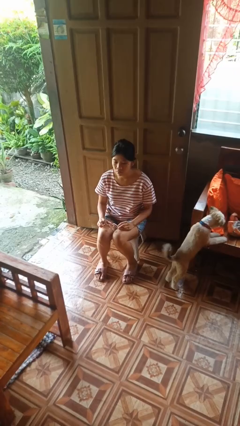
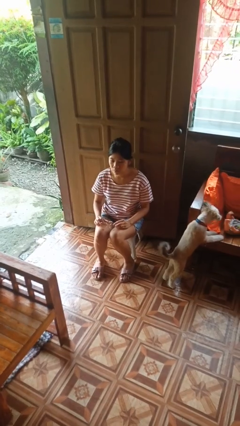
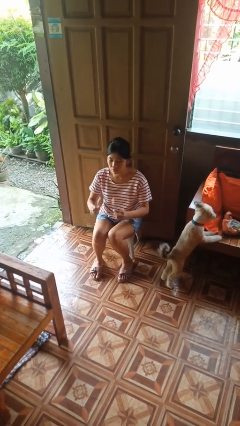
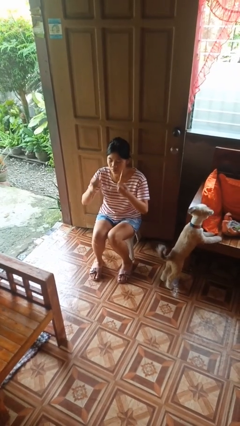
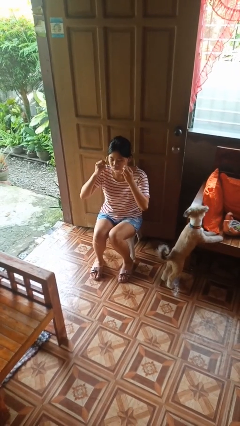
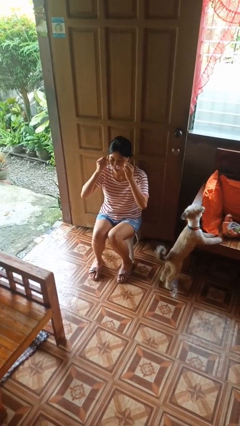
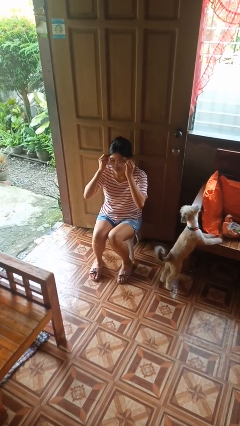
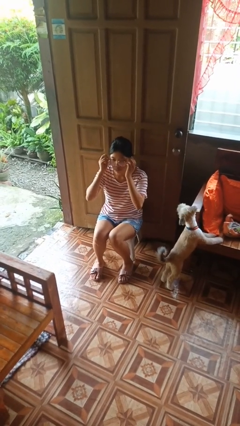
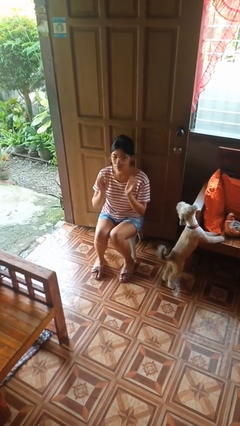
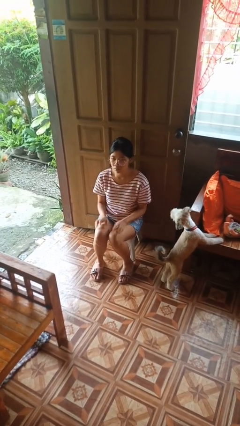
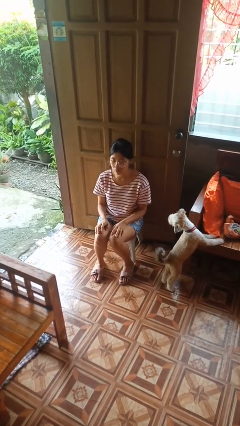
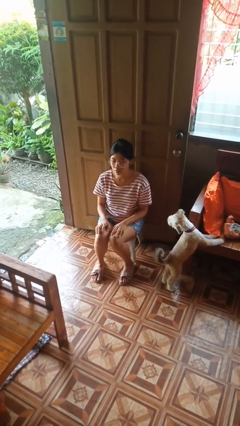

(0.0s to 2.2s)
person puts on glasses

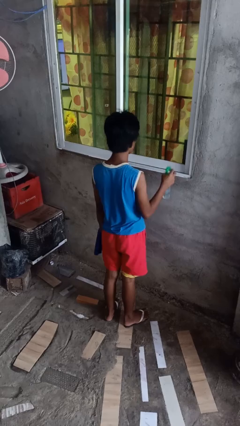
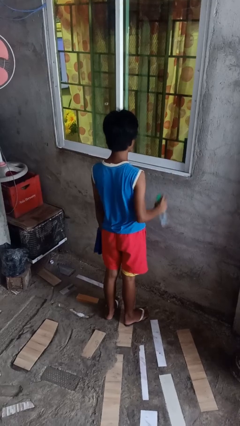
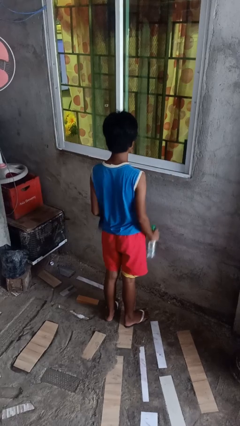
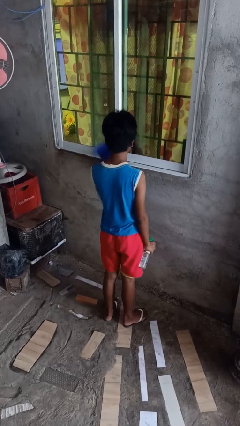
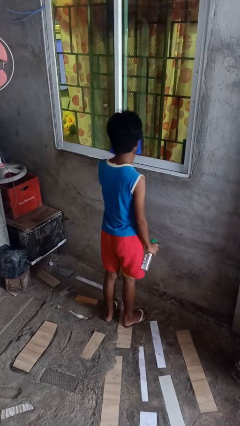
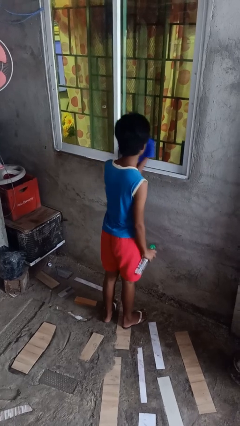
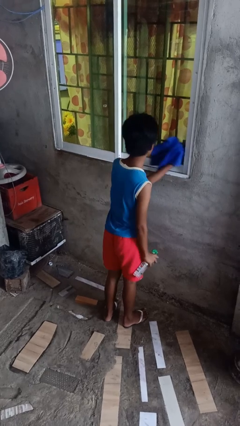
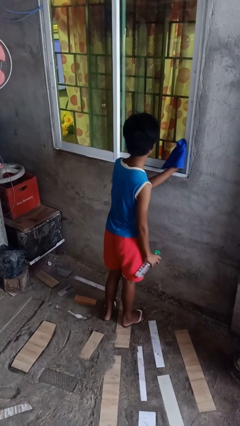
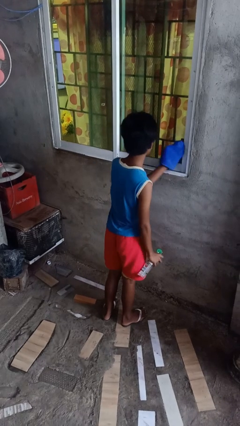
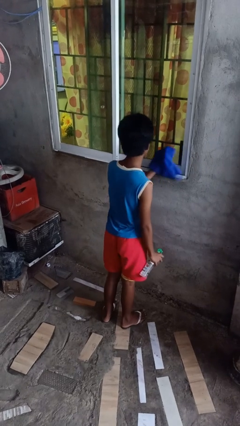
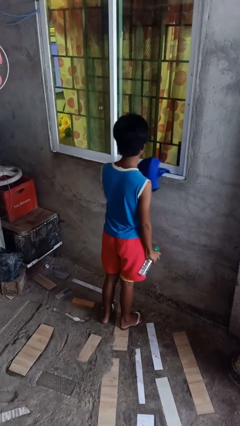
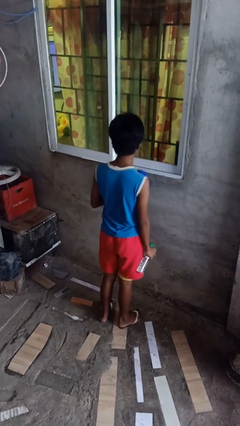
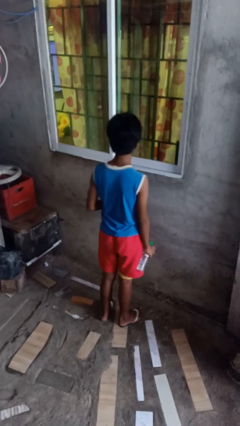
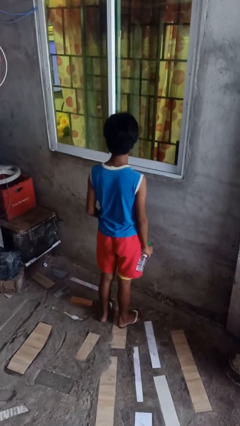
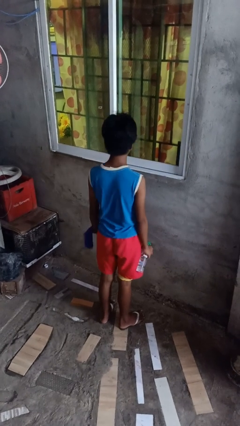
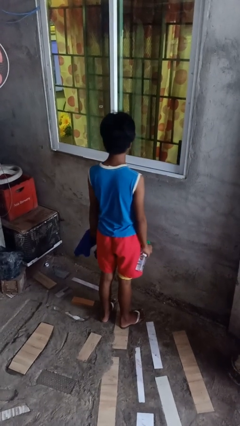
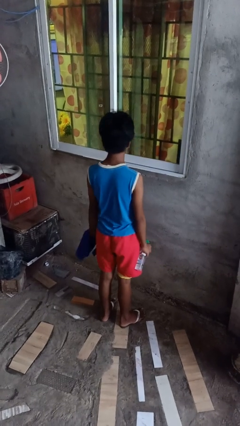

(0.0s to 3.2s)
person washes window

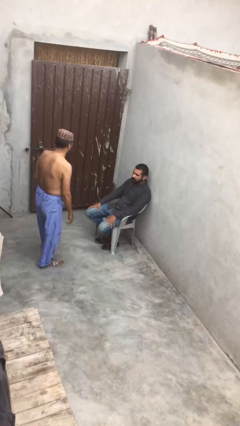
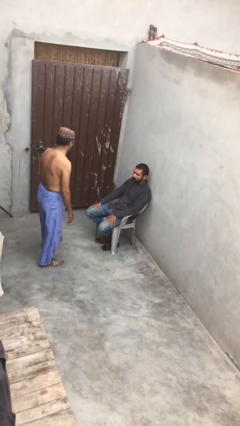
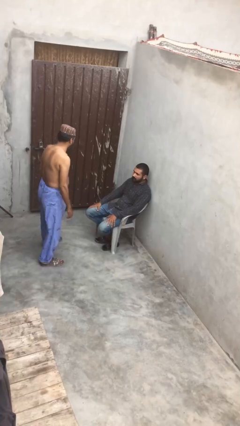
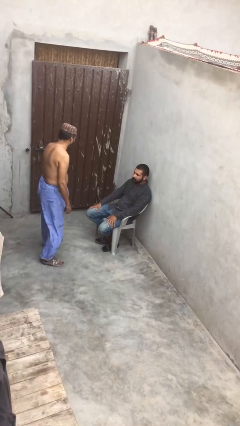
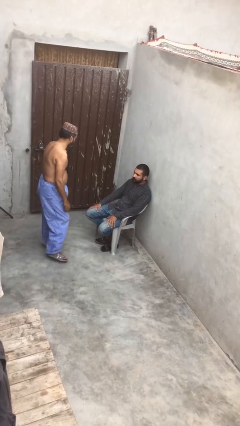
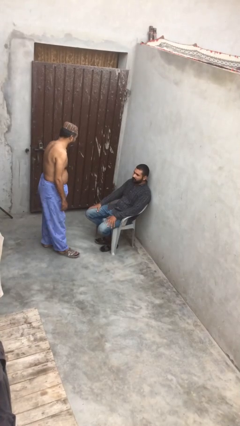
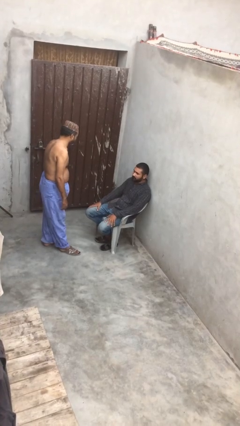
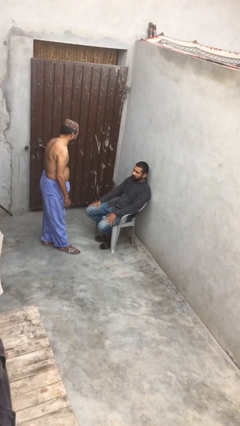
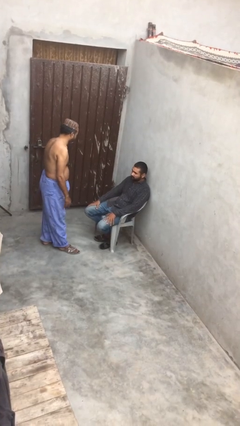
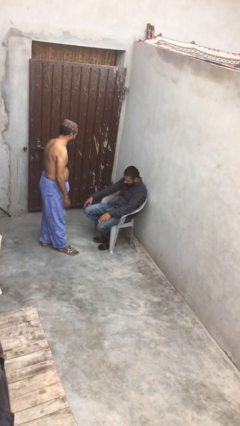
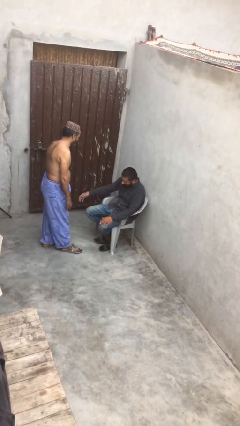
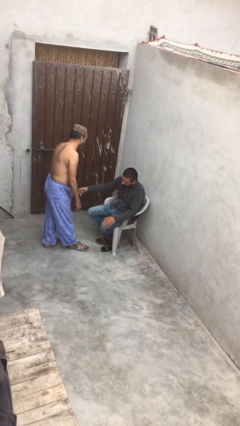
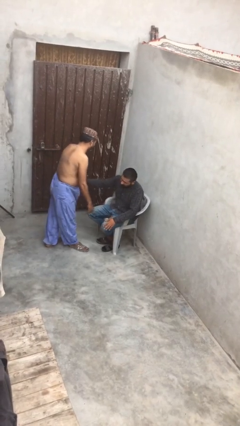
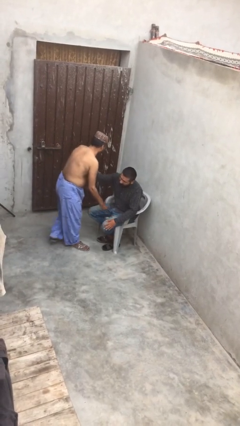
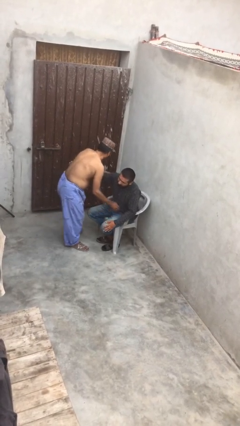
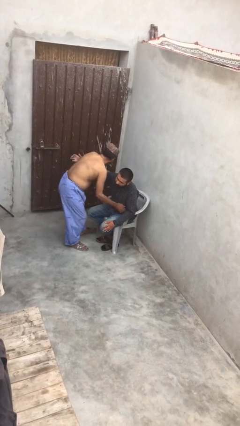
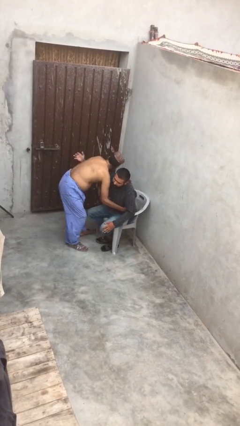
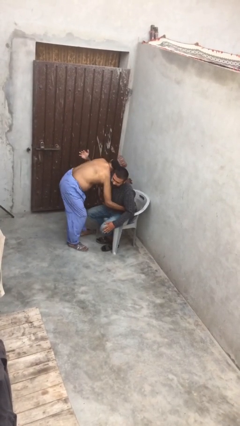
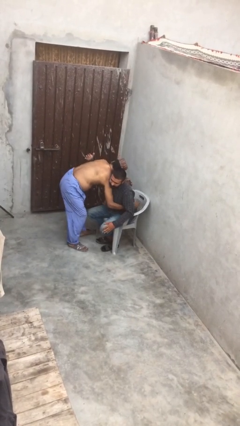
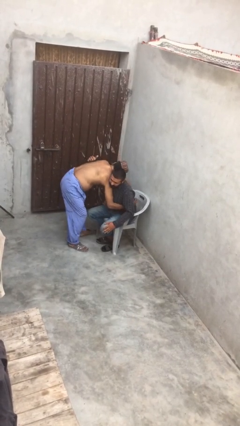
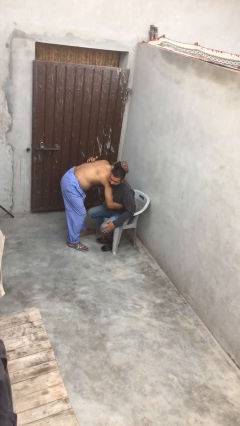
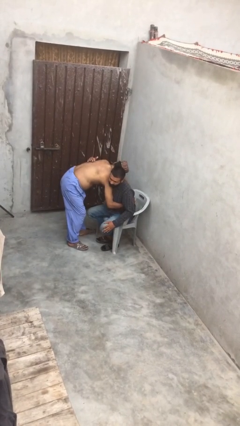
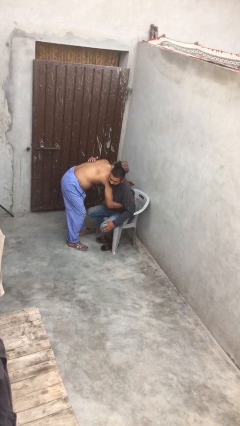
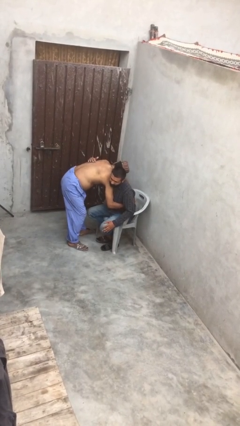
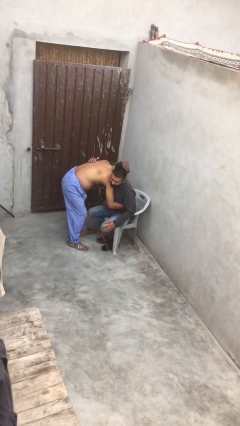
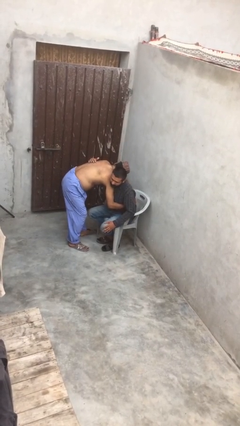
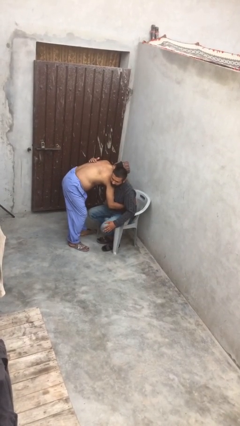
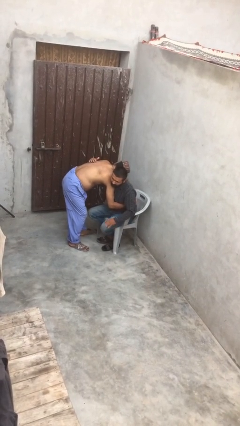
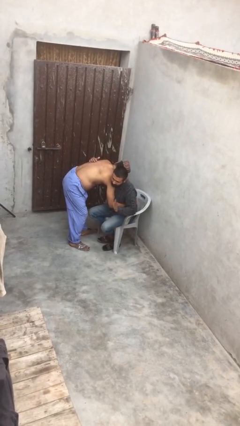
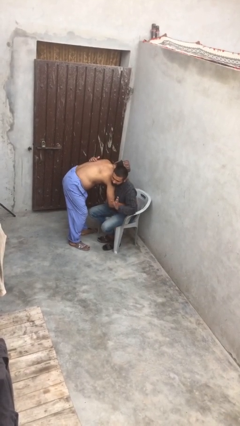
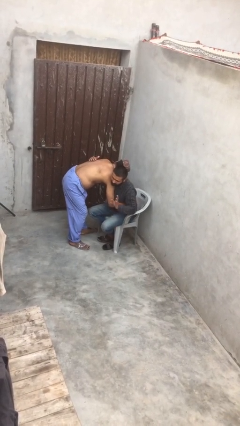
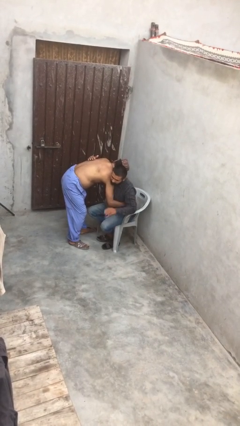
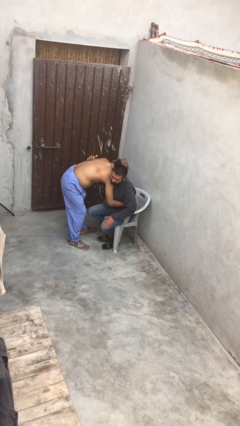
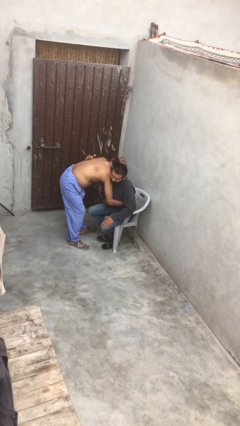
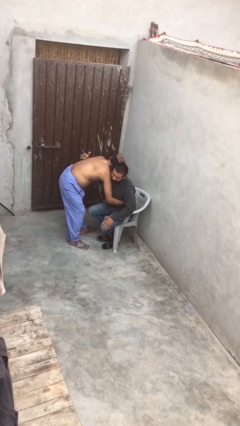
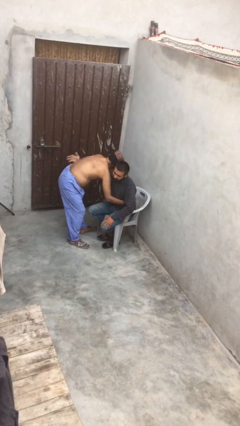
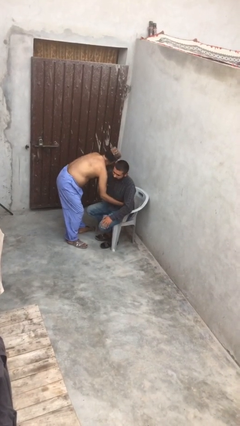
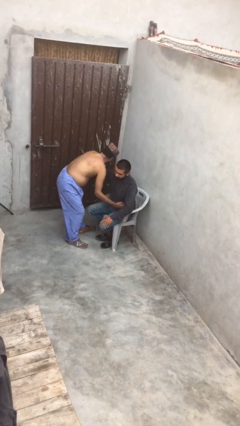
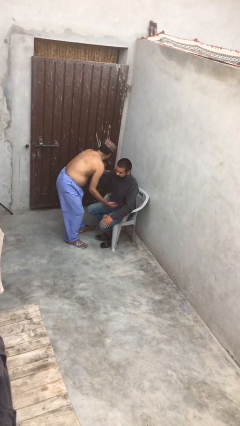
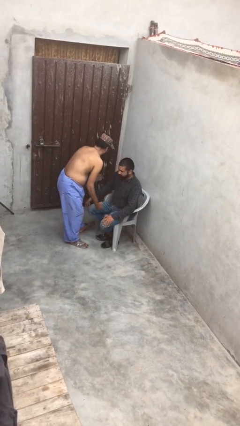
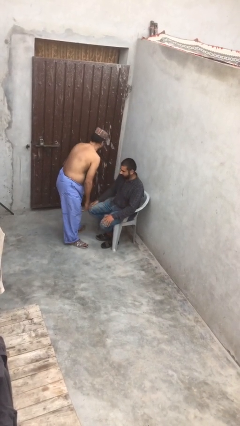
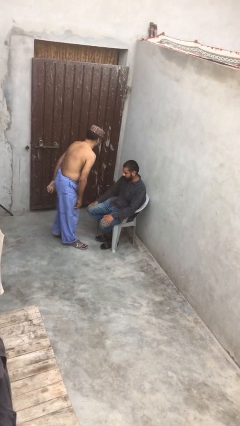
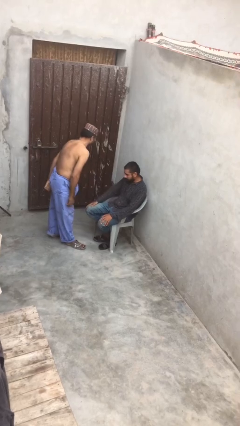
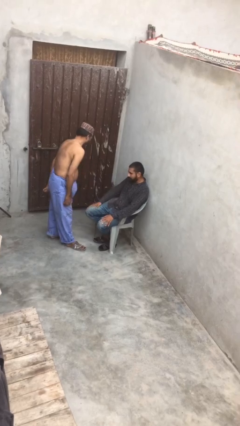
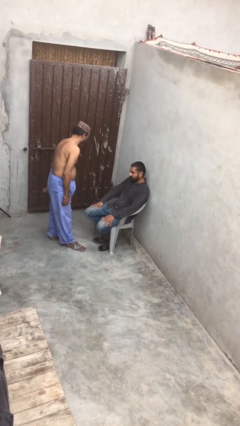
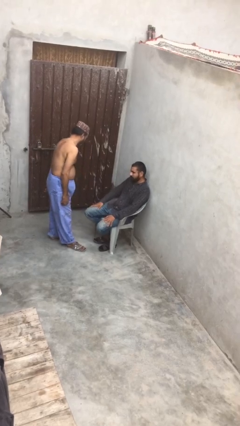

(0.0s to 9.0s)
person embraces person

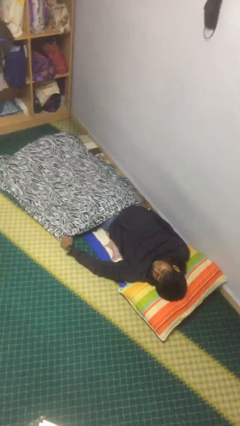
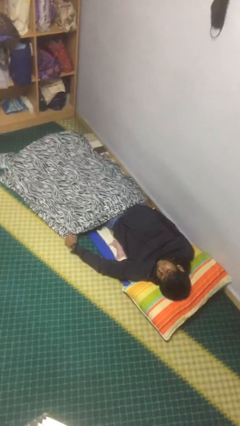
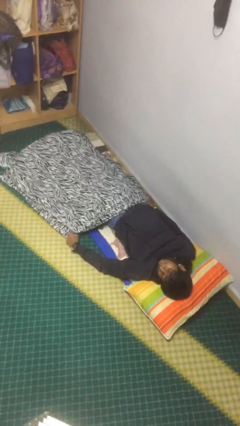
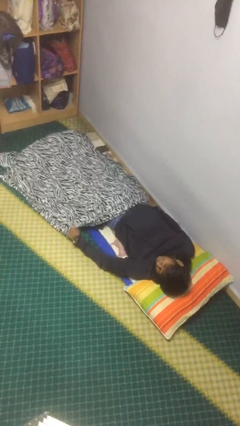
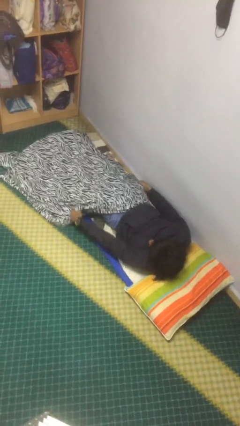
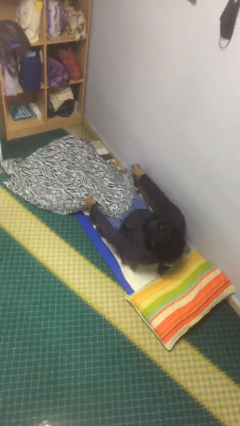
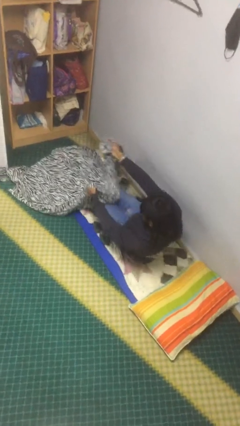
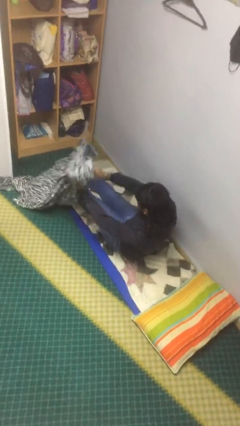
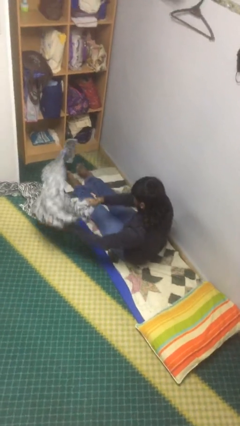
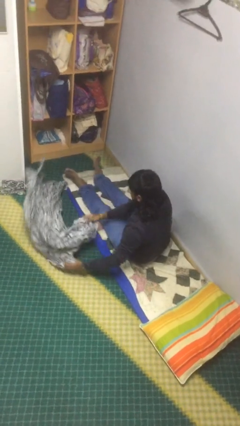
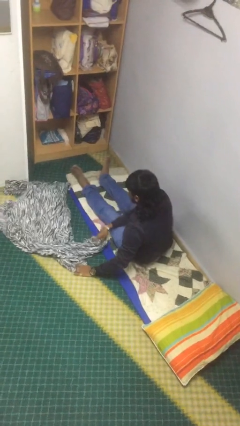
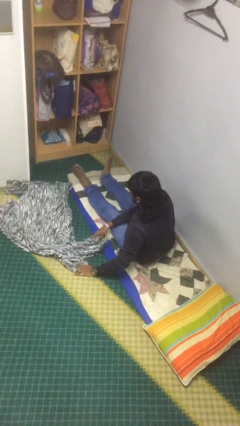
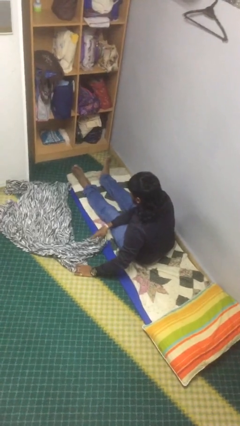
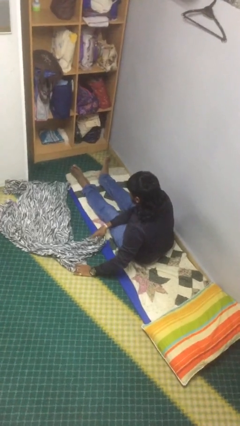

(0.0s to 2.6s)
person uncovers with blanket

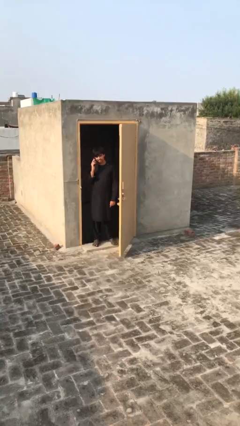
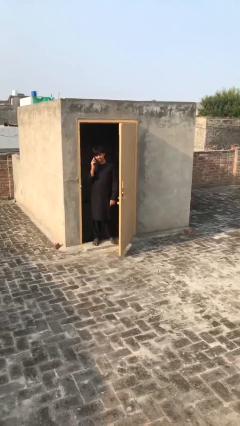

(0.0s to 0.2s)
person enters scene through structure
